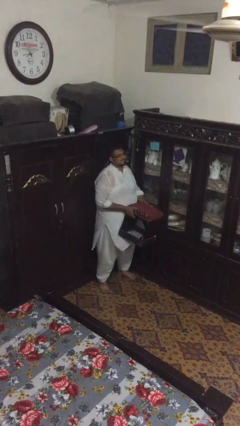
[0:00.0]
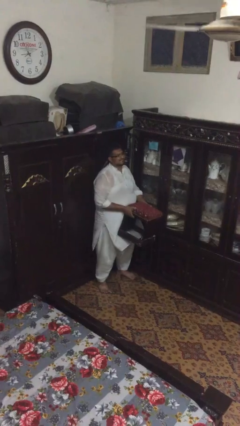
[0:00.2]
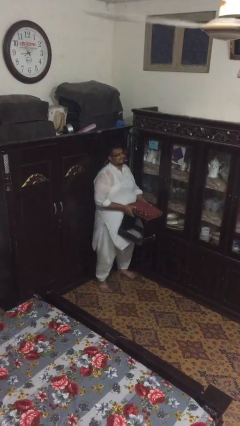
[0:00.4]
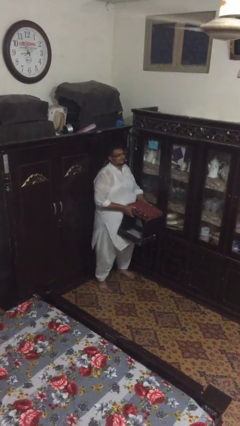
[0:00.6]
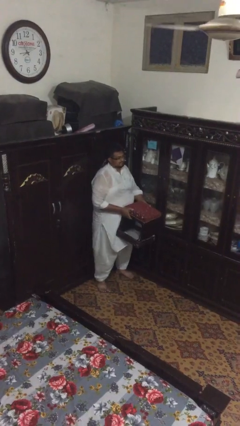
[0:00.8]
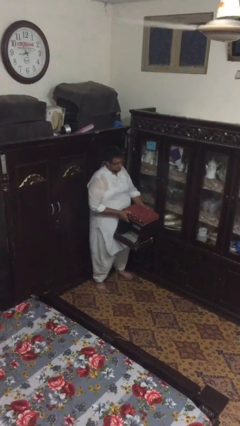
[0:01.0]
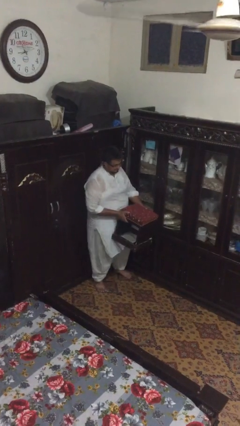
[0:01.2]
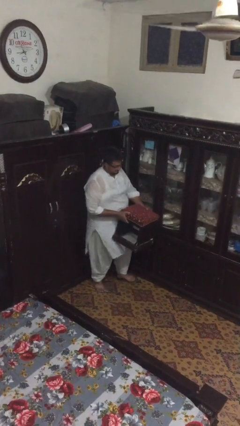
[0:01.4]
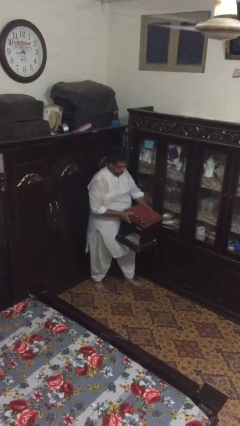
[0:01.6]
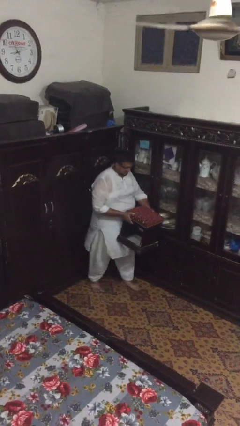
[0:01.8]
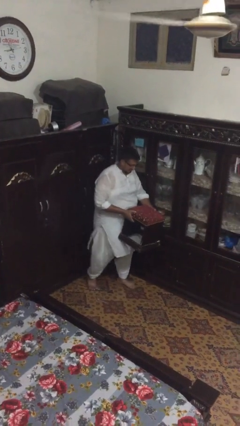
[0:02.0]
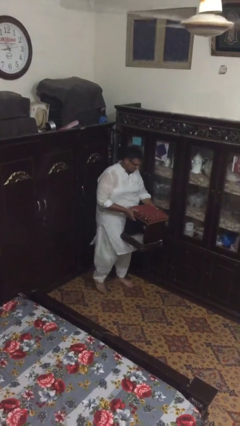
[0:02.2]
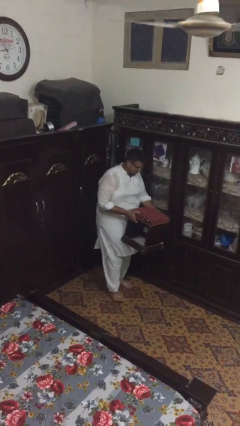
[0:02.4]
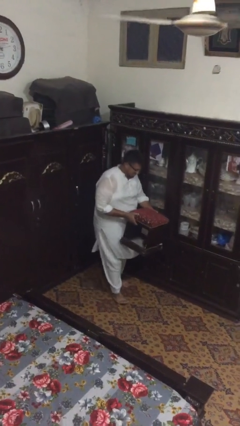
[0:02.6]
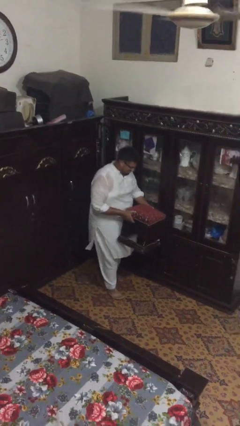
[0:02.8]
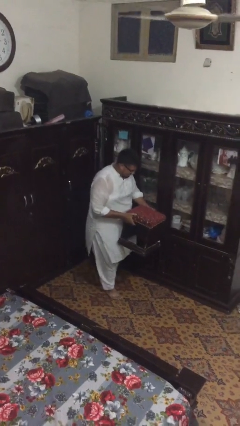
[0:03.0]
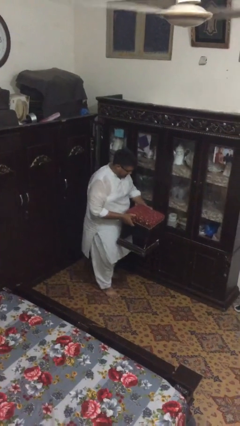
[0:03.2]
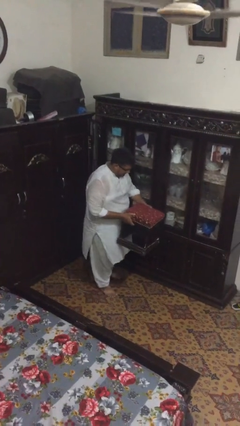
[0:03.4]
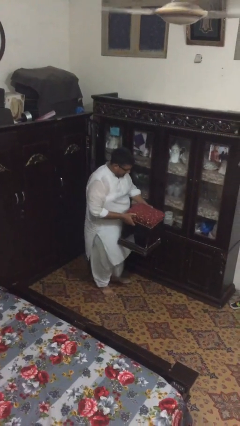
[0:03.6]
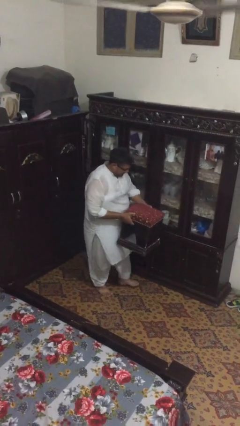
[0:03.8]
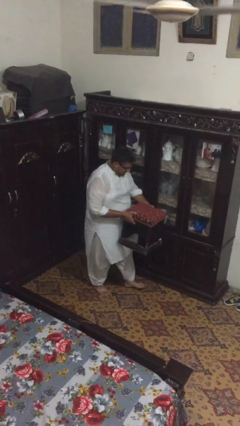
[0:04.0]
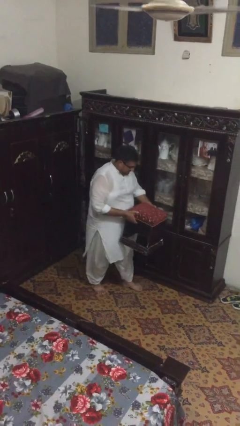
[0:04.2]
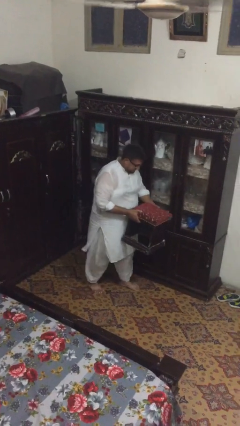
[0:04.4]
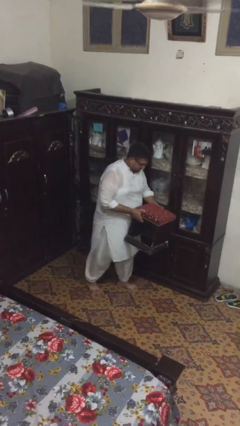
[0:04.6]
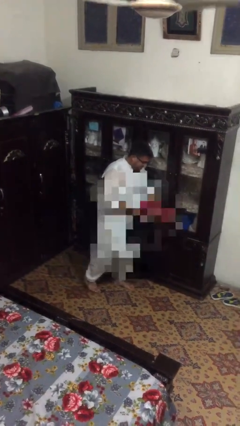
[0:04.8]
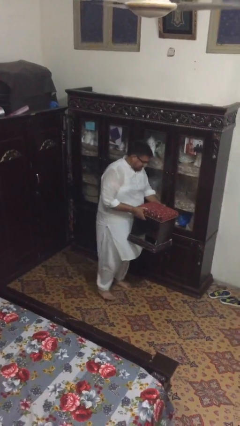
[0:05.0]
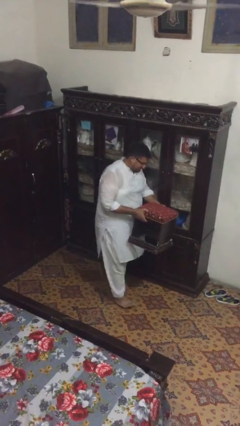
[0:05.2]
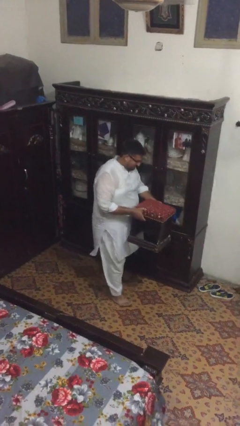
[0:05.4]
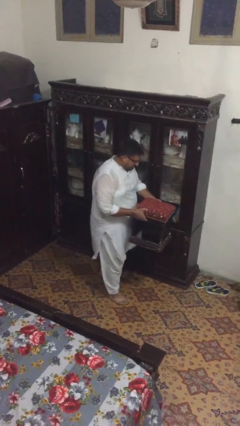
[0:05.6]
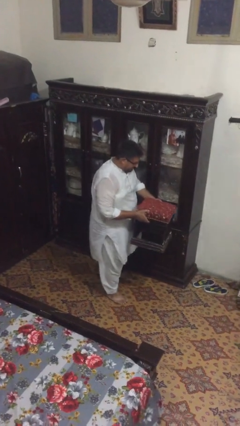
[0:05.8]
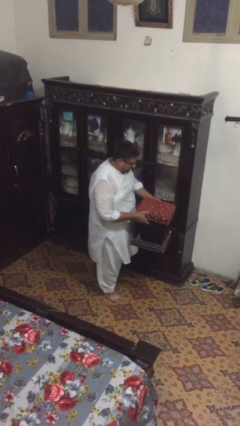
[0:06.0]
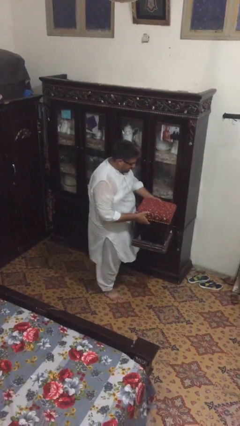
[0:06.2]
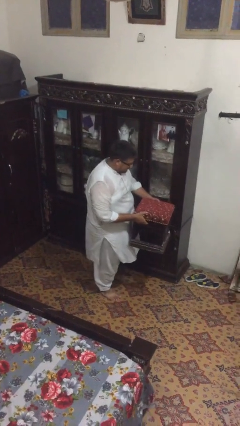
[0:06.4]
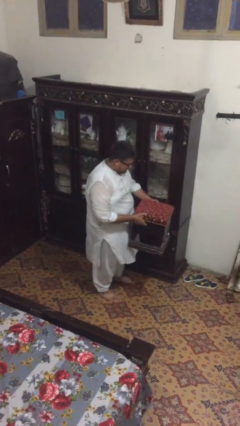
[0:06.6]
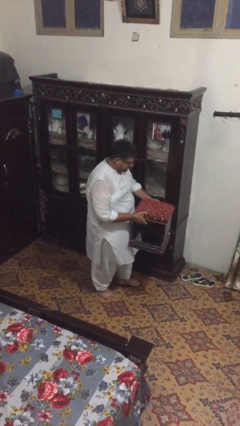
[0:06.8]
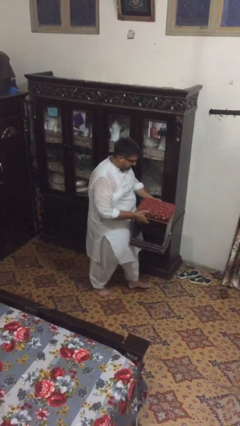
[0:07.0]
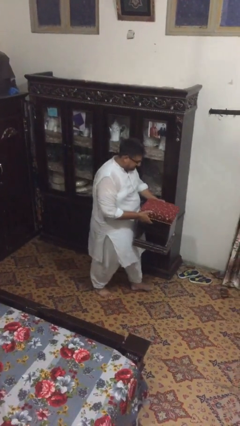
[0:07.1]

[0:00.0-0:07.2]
person carries heavy object

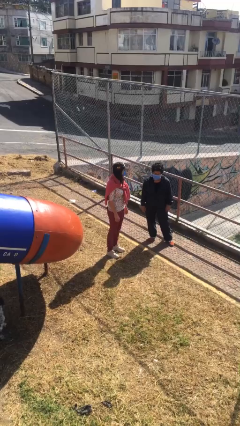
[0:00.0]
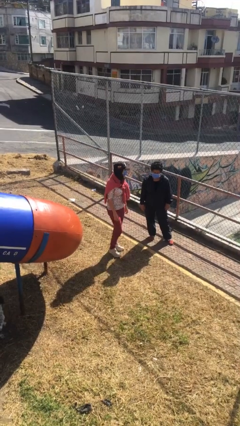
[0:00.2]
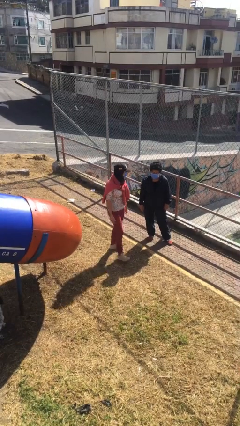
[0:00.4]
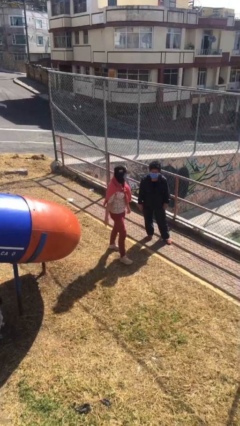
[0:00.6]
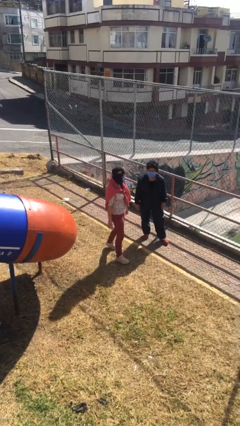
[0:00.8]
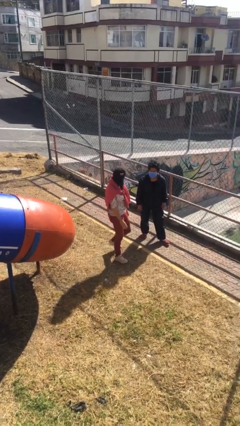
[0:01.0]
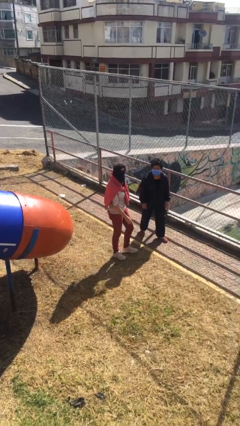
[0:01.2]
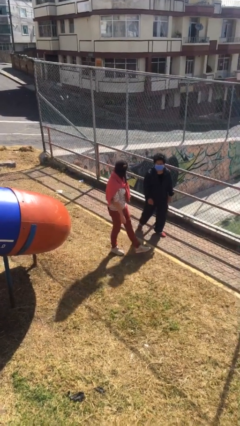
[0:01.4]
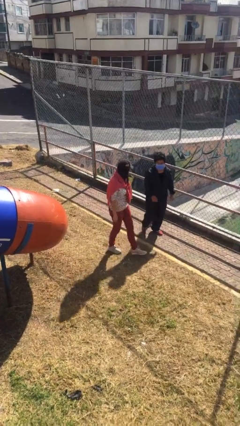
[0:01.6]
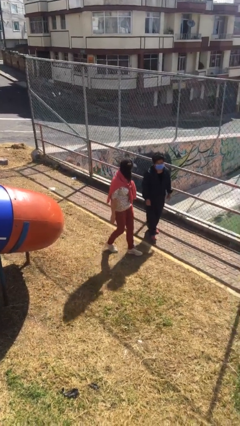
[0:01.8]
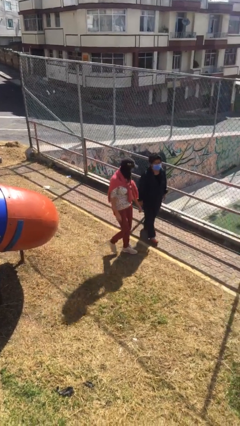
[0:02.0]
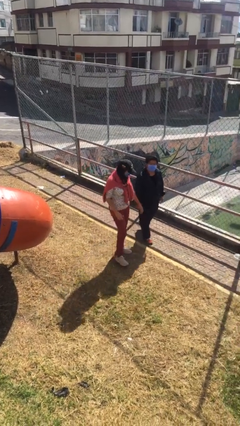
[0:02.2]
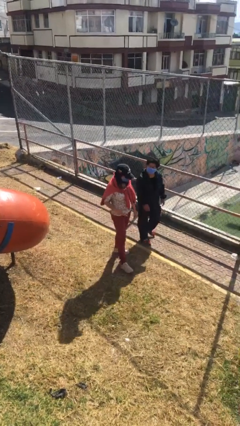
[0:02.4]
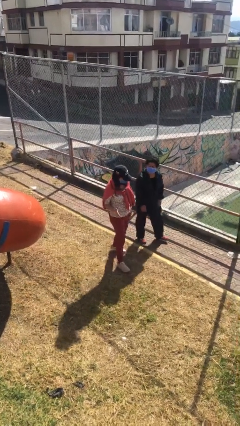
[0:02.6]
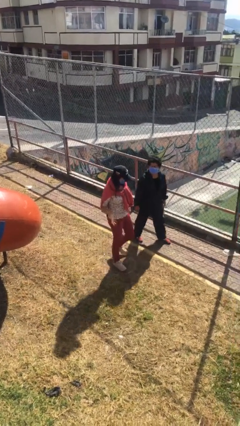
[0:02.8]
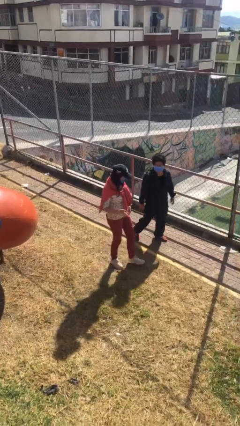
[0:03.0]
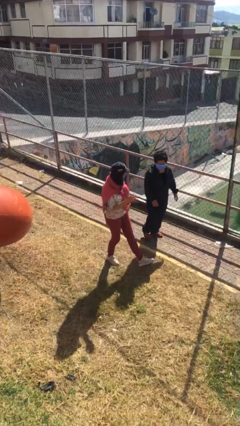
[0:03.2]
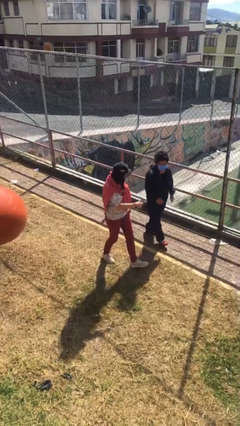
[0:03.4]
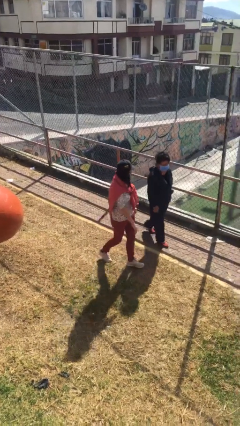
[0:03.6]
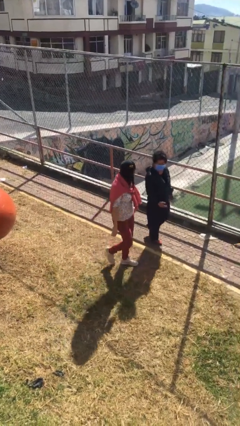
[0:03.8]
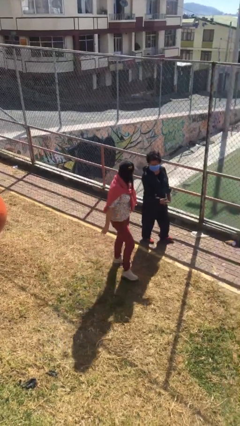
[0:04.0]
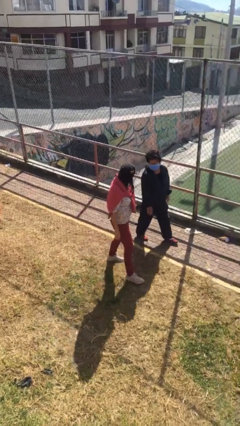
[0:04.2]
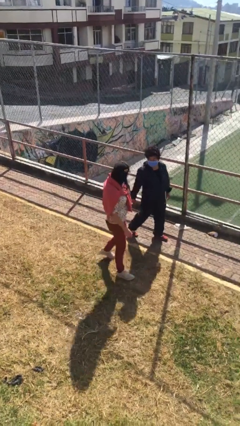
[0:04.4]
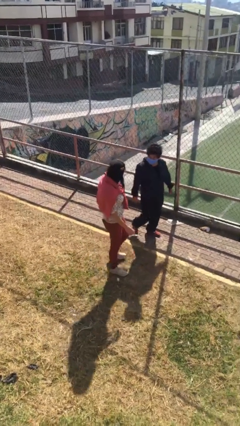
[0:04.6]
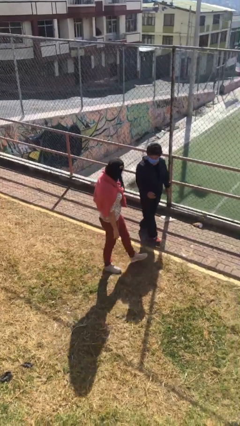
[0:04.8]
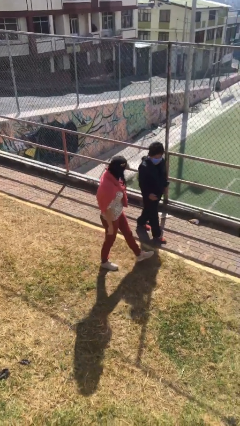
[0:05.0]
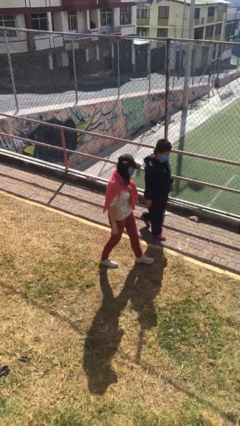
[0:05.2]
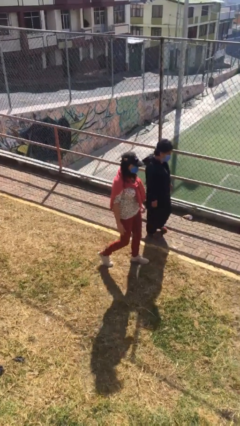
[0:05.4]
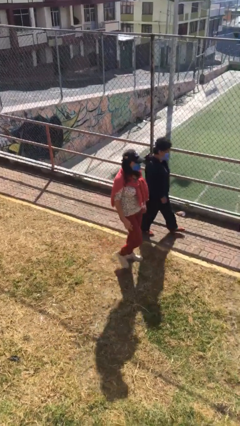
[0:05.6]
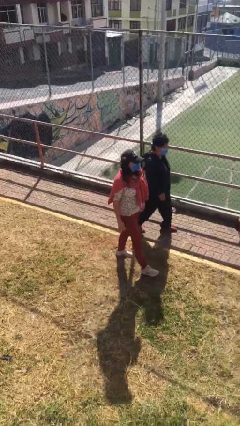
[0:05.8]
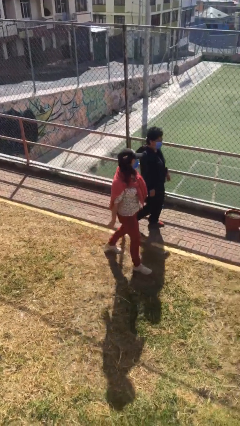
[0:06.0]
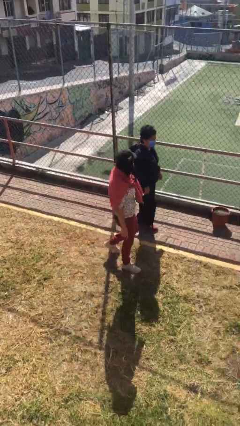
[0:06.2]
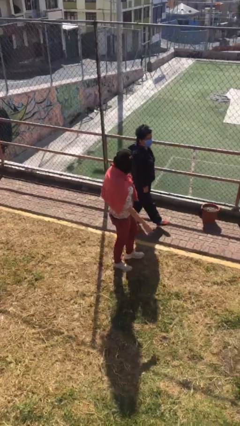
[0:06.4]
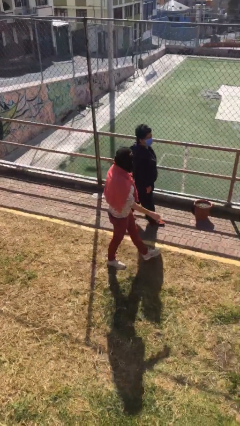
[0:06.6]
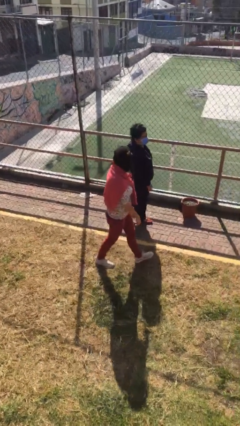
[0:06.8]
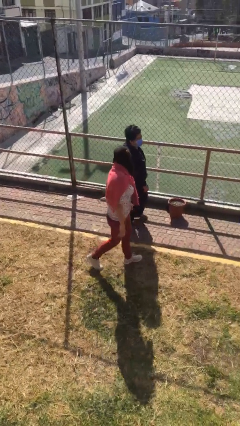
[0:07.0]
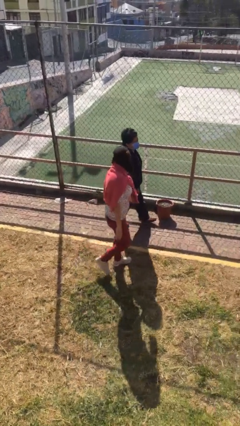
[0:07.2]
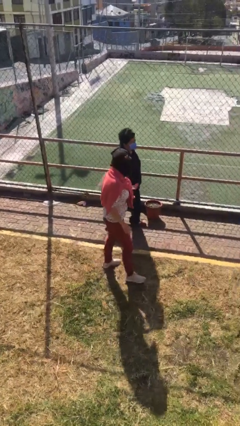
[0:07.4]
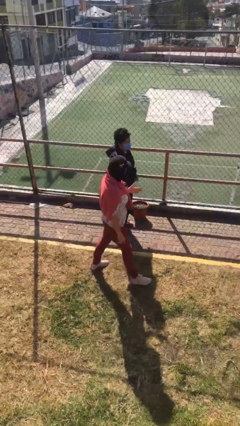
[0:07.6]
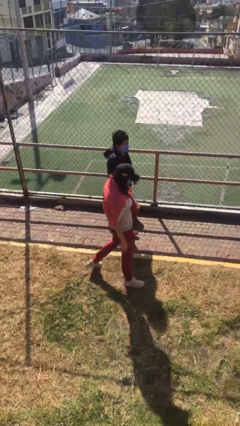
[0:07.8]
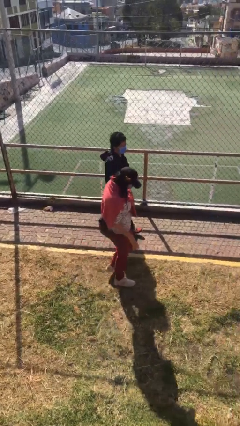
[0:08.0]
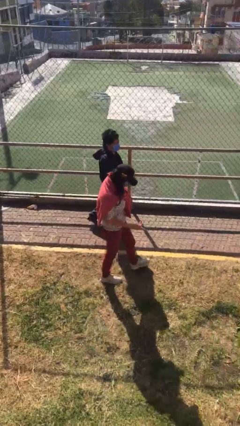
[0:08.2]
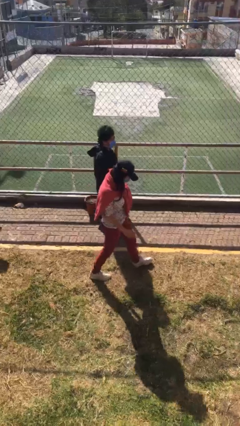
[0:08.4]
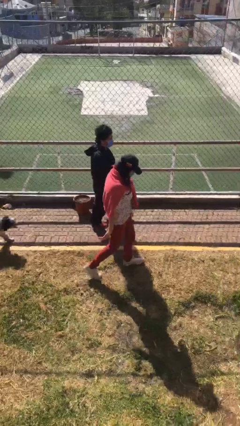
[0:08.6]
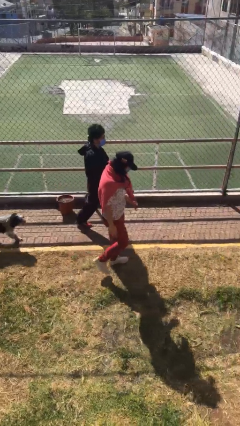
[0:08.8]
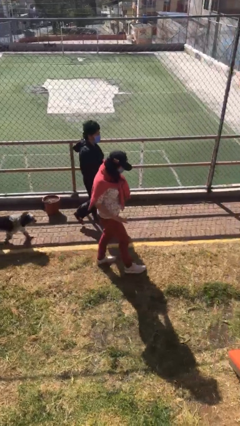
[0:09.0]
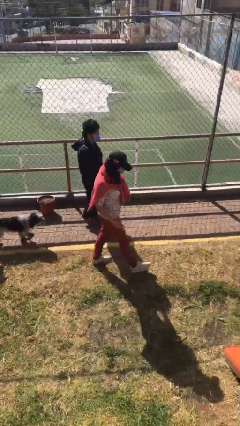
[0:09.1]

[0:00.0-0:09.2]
person talks to person

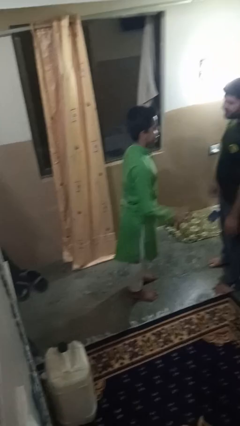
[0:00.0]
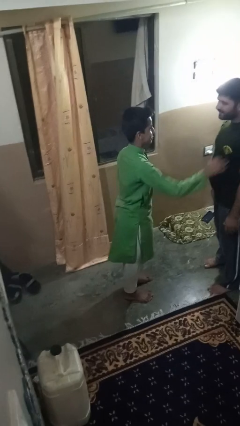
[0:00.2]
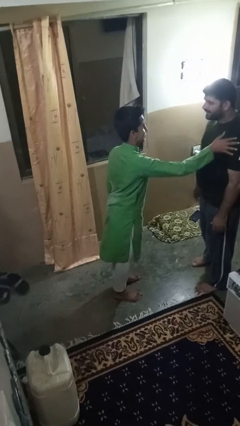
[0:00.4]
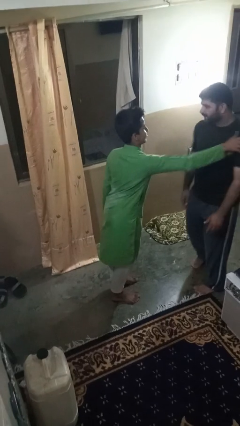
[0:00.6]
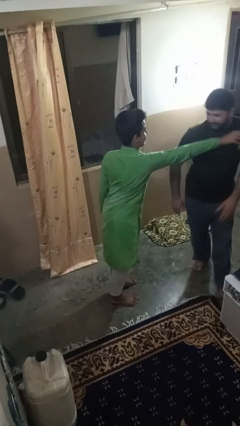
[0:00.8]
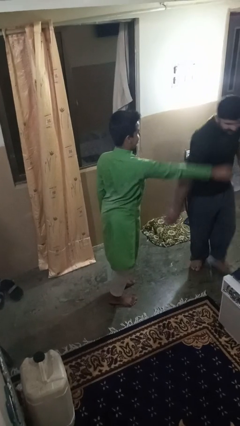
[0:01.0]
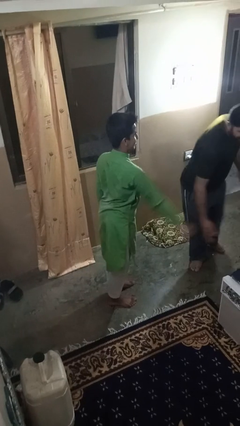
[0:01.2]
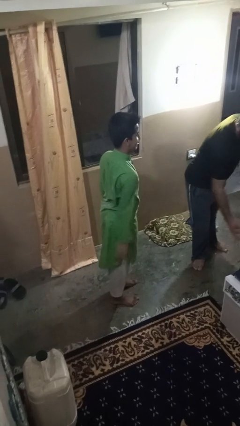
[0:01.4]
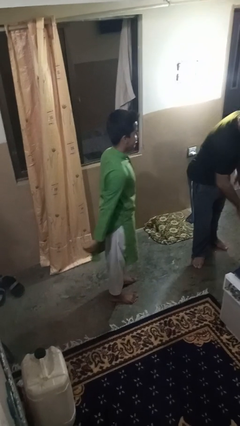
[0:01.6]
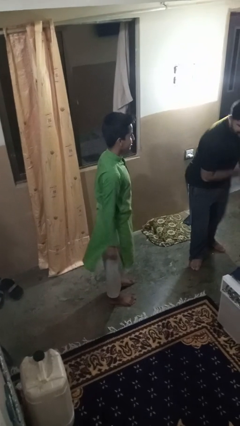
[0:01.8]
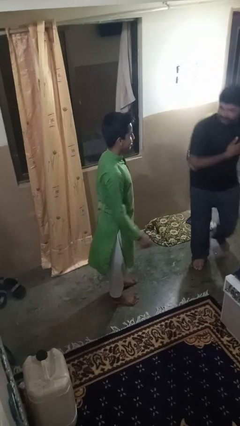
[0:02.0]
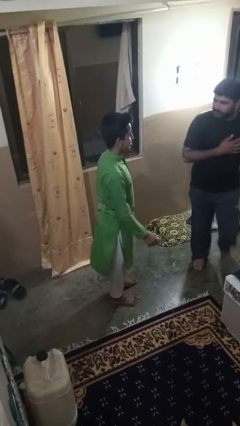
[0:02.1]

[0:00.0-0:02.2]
person shoves person
